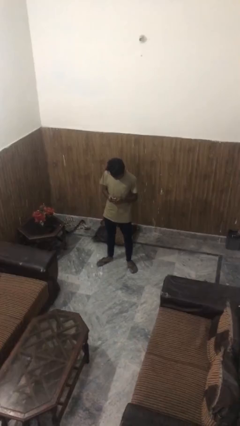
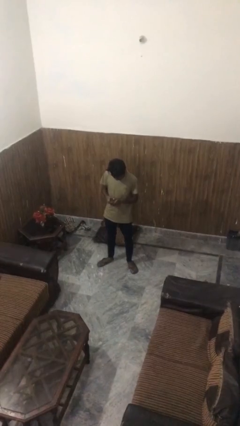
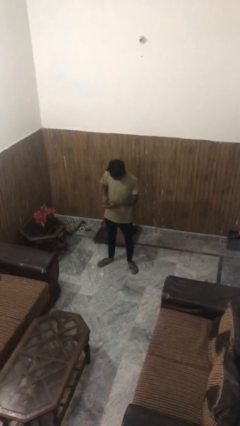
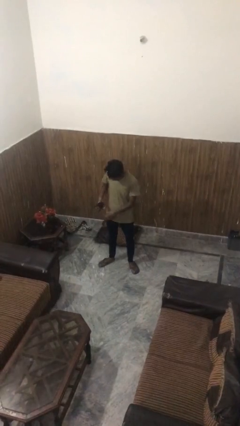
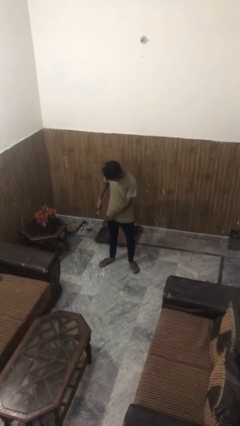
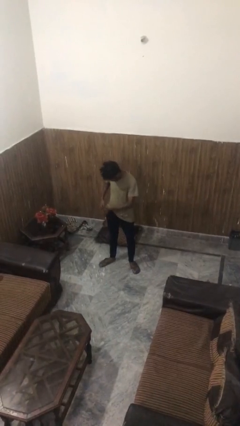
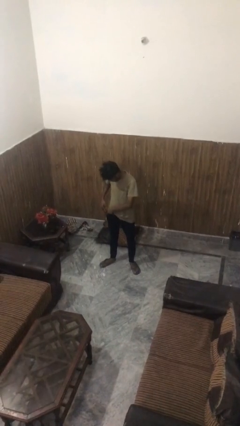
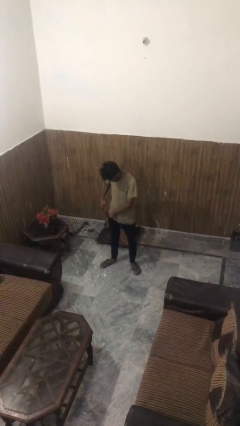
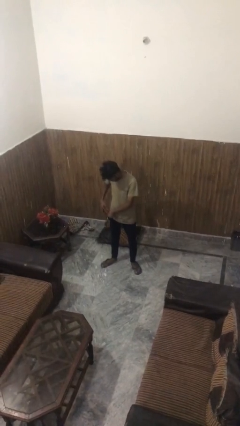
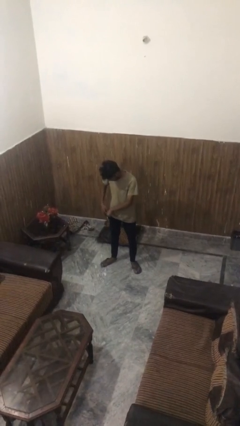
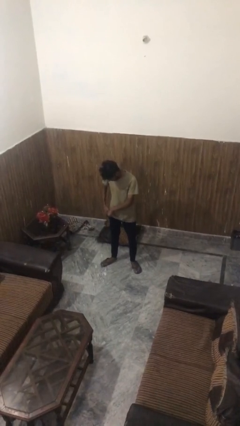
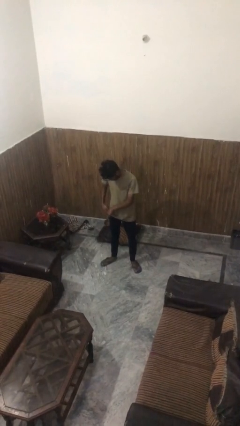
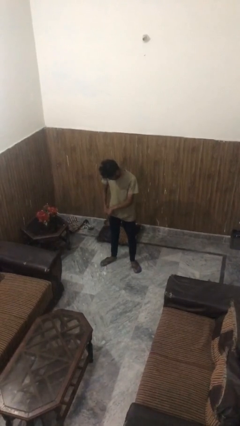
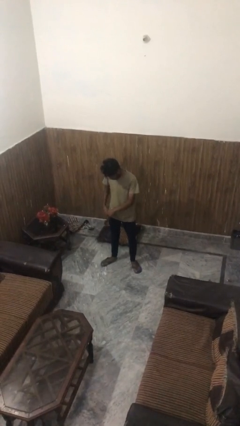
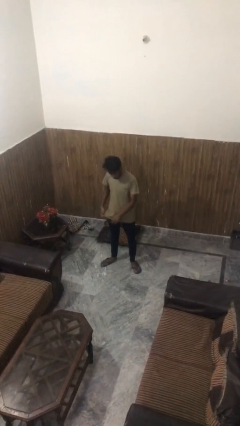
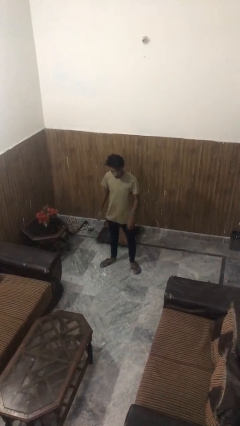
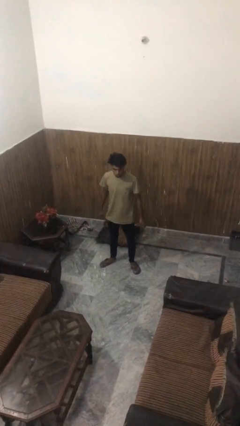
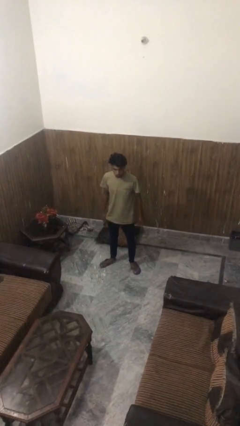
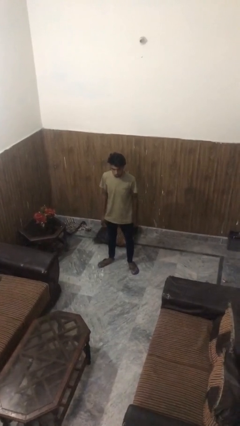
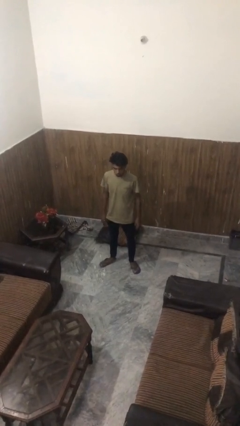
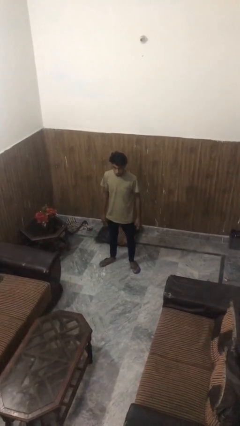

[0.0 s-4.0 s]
person puts phone into pocket

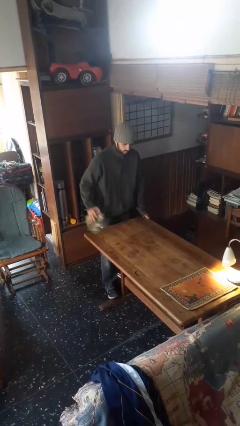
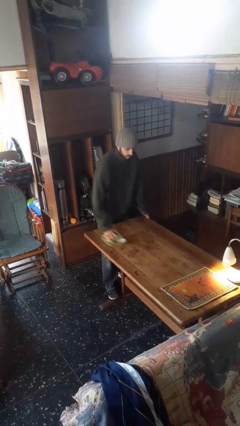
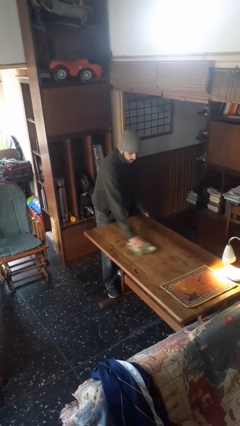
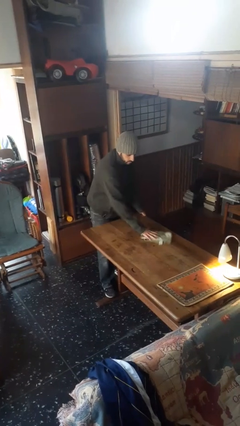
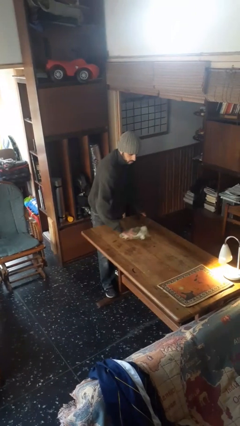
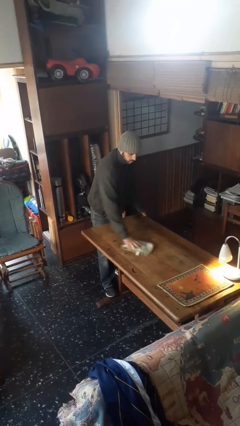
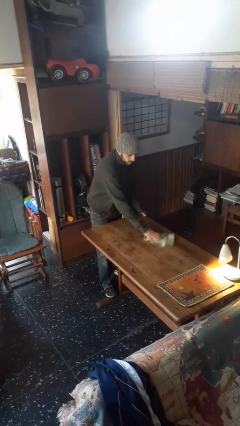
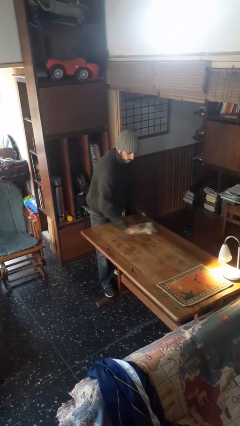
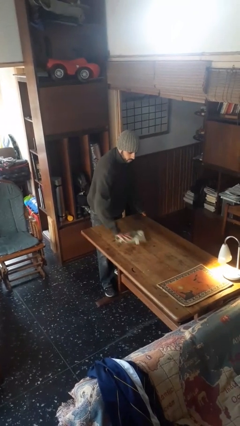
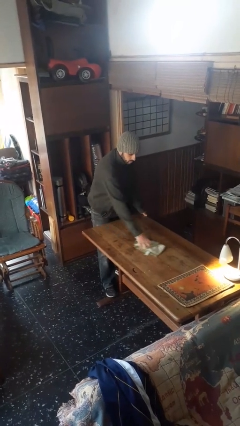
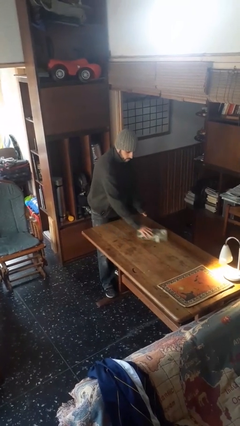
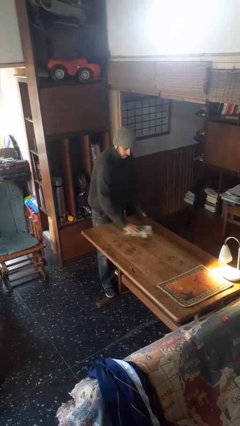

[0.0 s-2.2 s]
person cleans table with rag

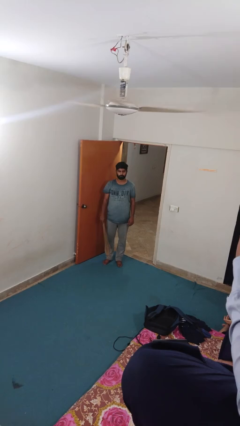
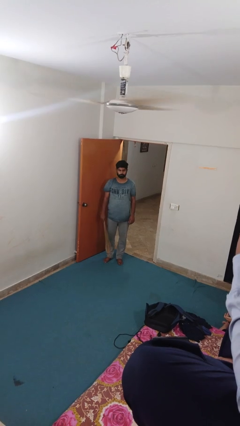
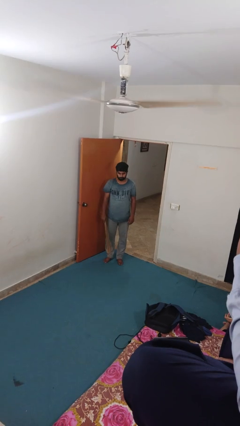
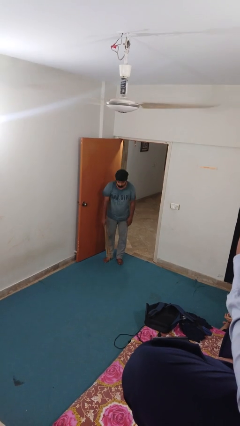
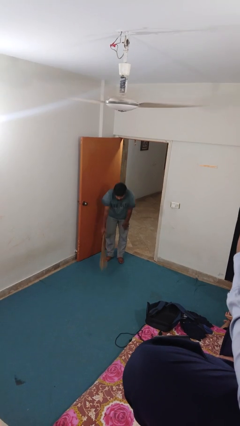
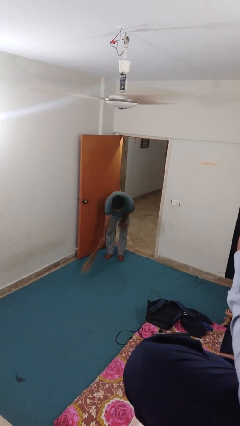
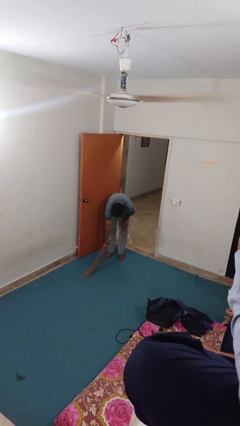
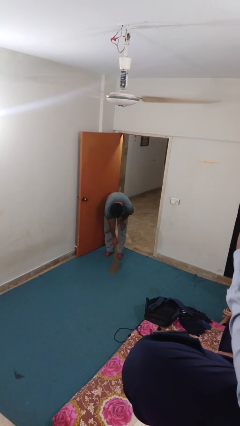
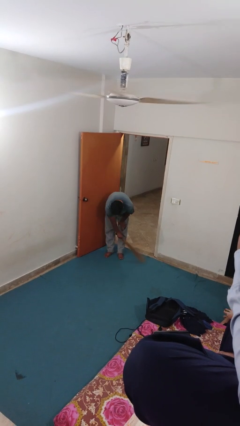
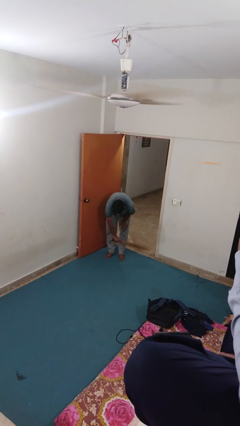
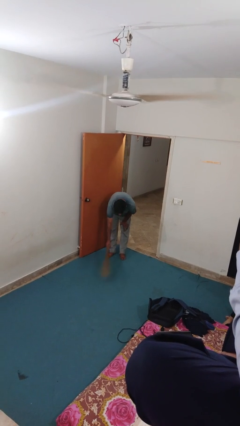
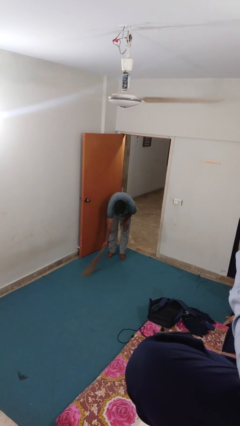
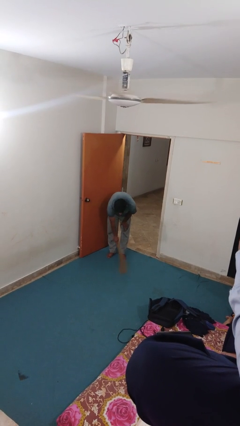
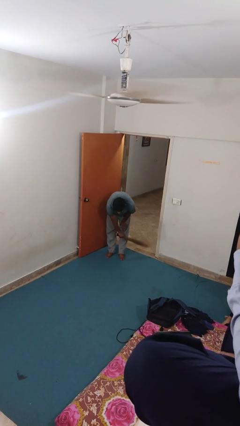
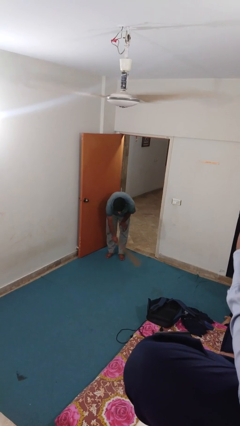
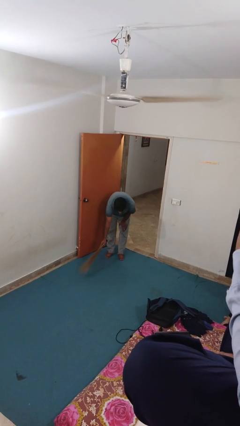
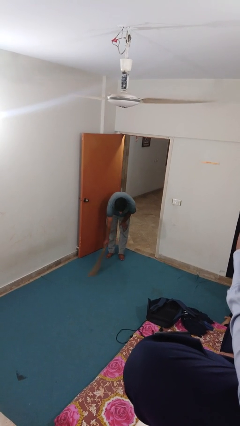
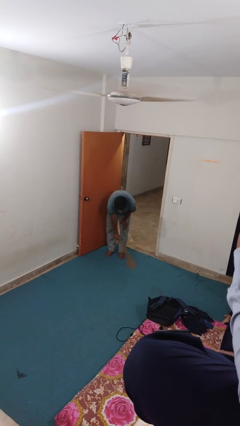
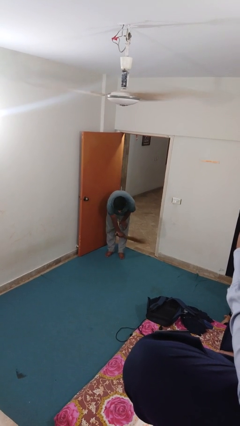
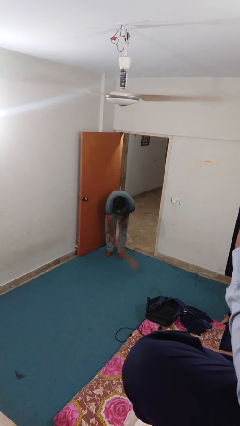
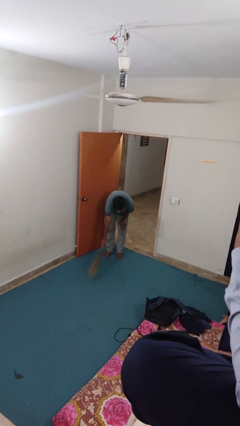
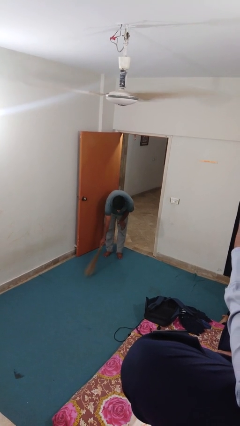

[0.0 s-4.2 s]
person sweeps floor

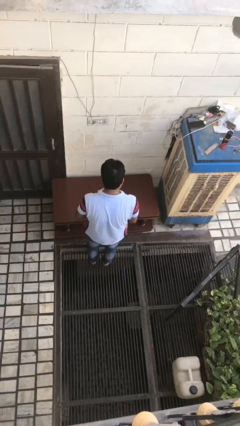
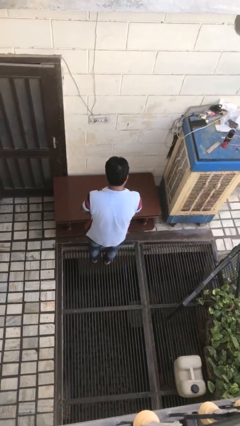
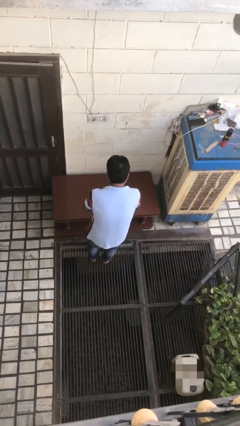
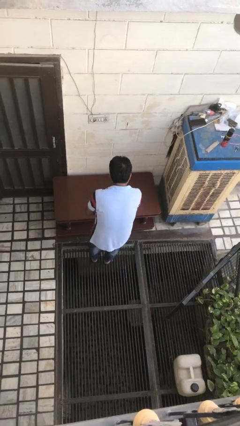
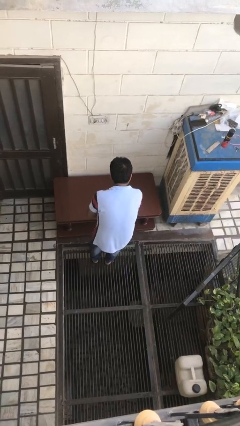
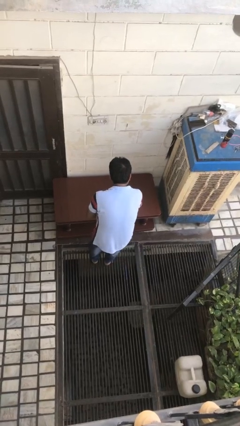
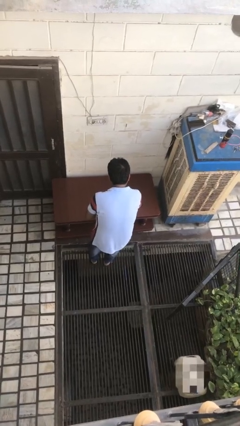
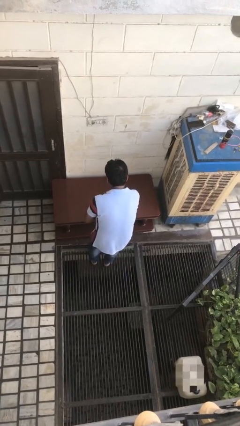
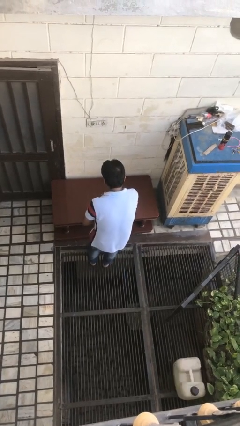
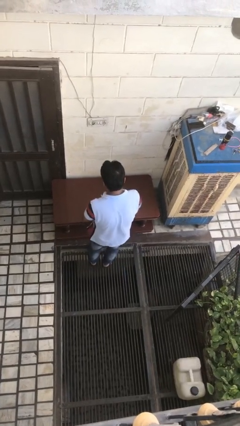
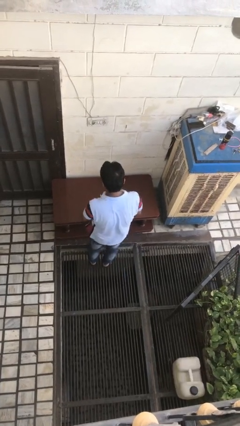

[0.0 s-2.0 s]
person sprays from bottle

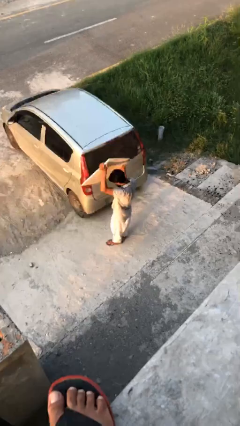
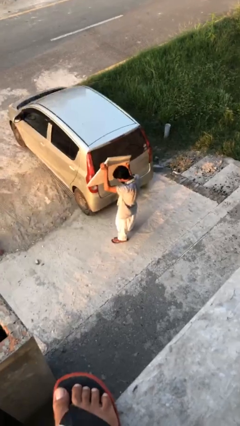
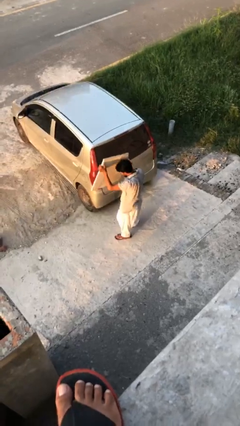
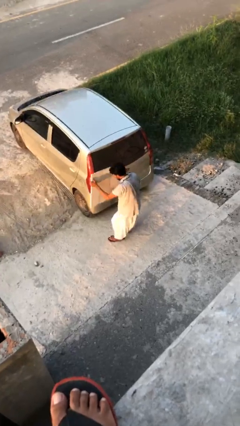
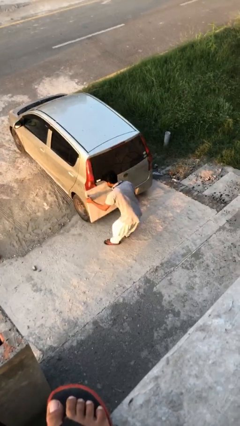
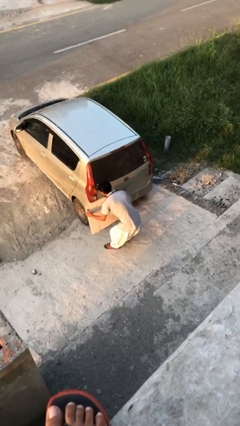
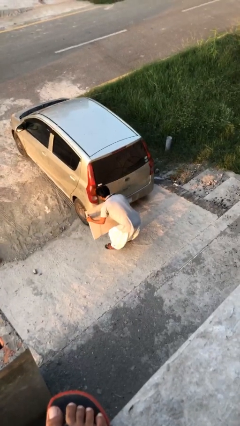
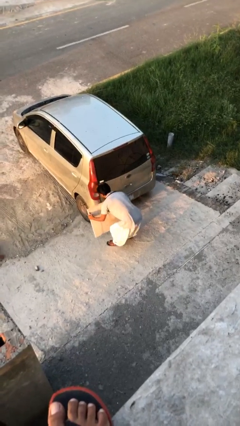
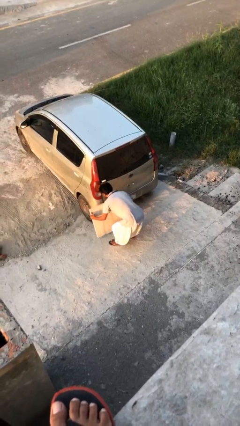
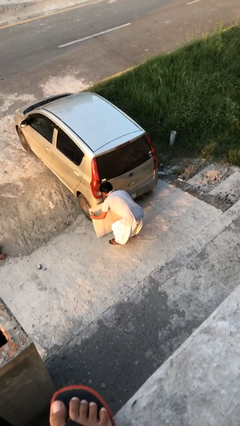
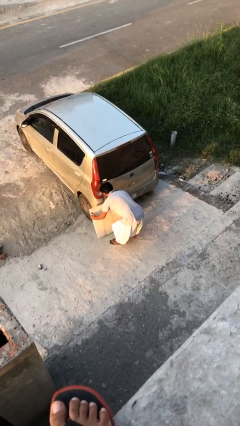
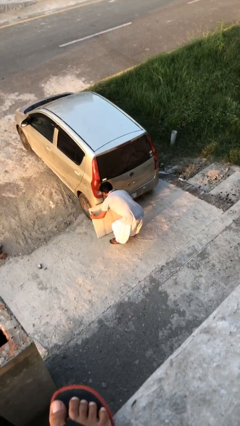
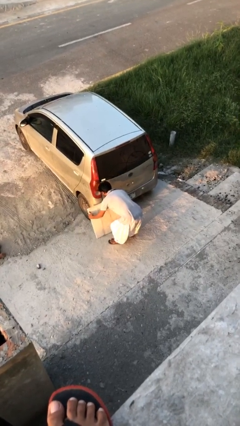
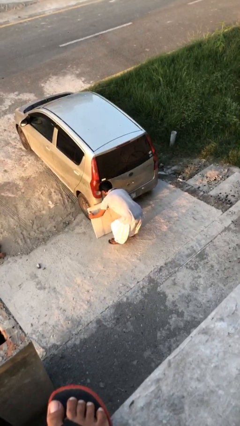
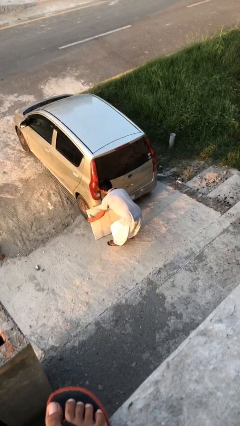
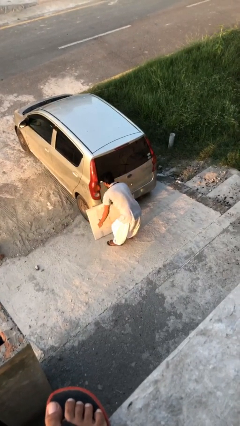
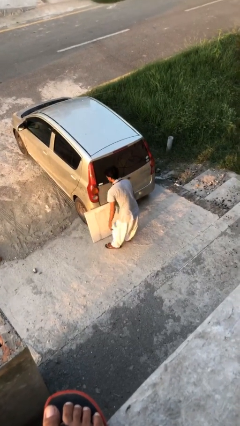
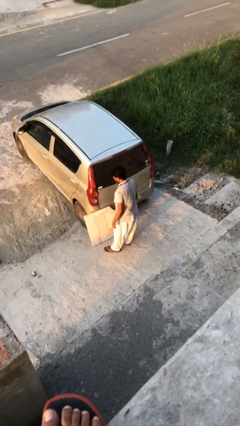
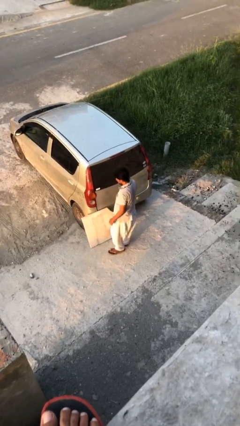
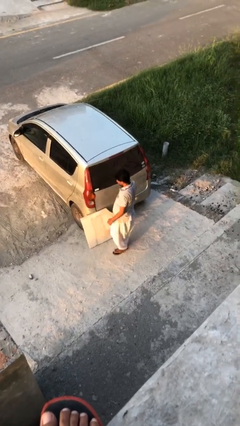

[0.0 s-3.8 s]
person puts down object on floor

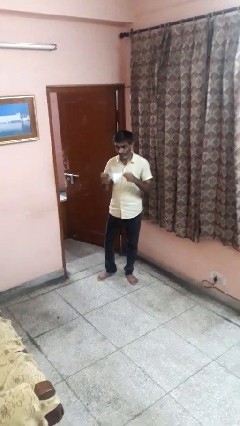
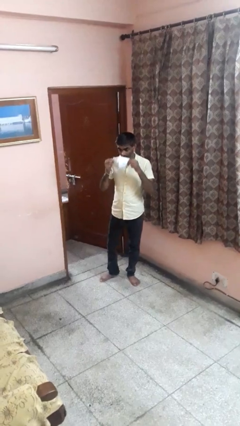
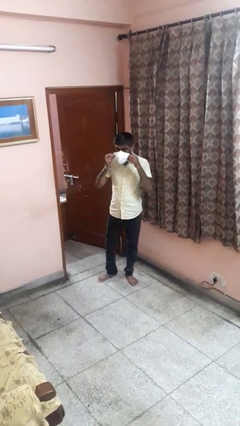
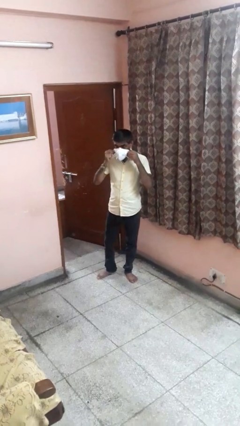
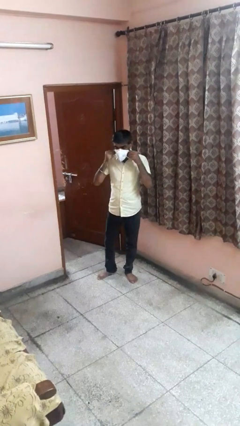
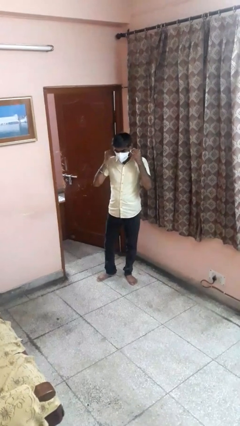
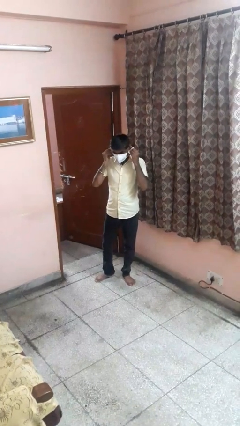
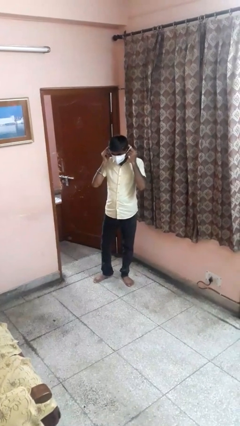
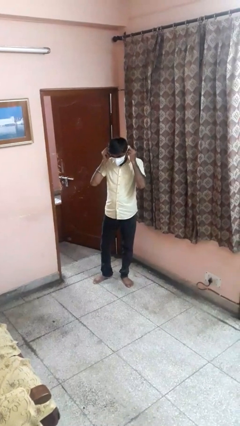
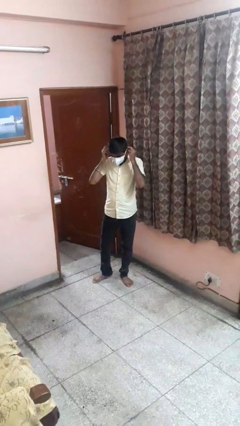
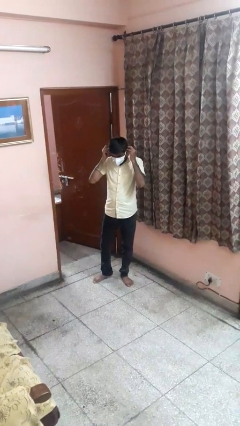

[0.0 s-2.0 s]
person puts on facemask
